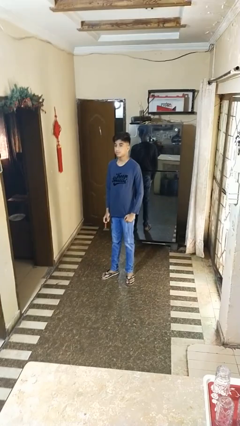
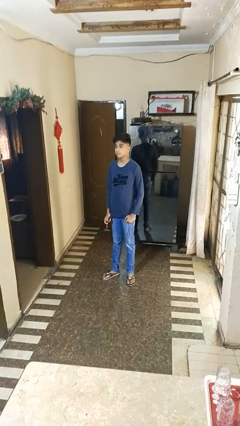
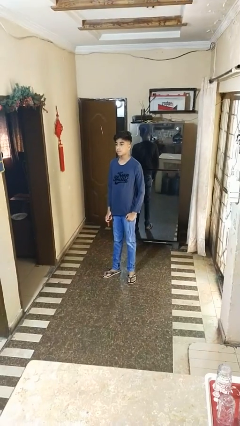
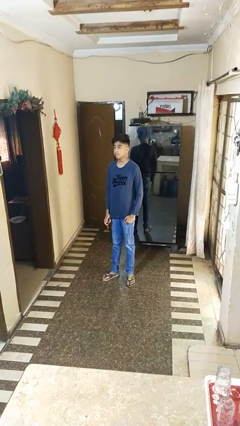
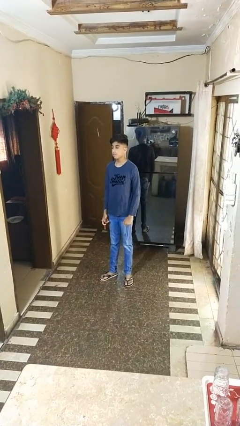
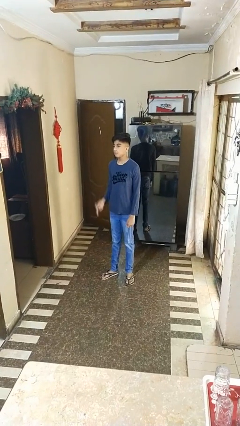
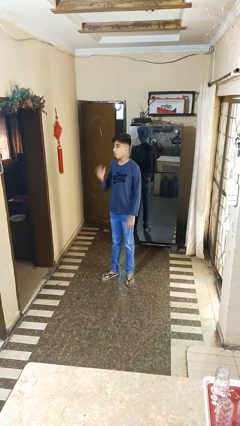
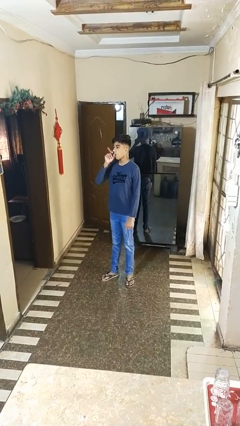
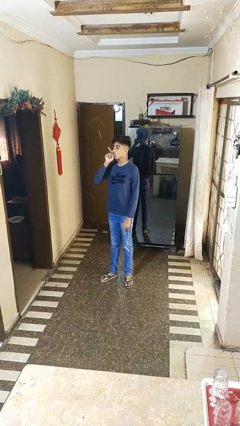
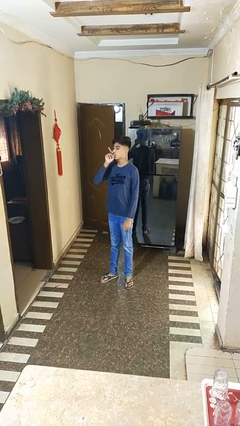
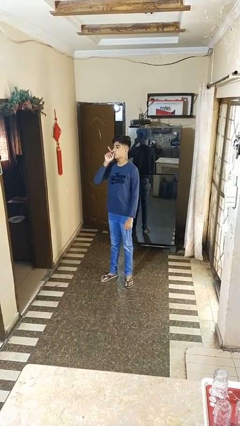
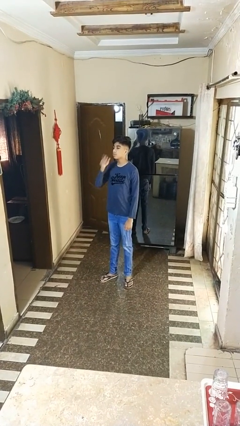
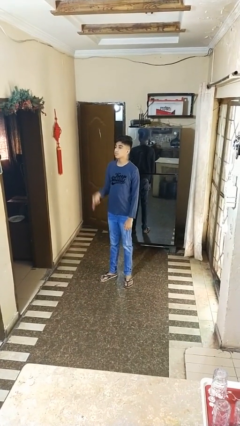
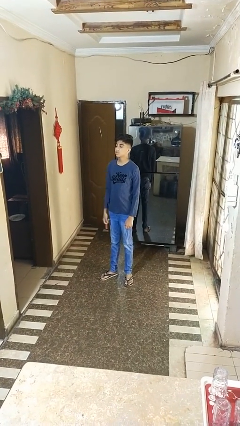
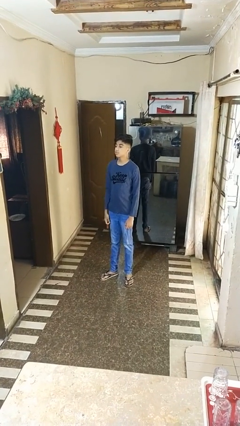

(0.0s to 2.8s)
person vapes

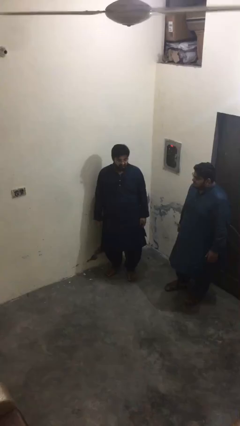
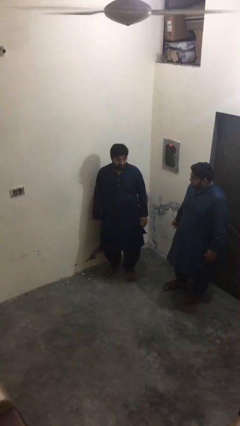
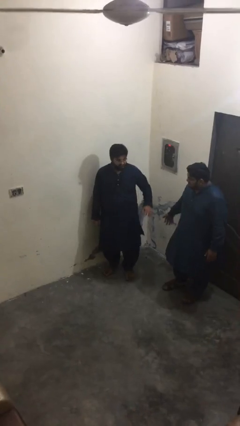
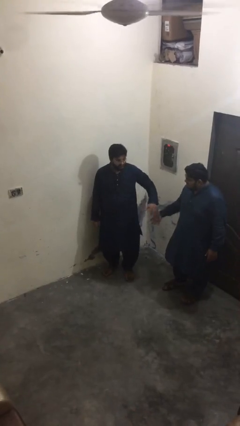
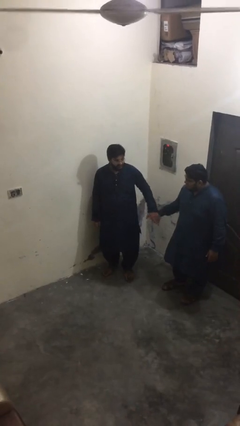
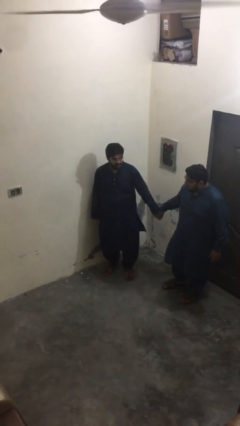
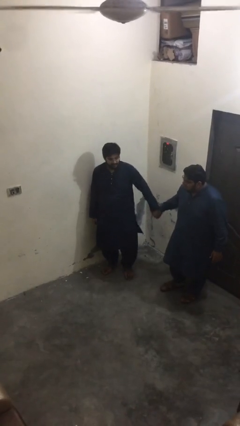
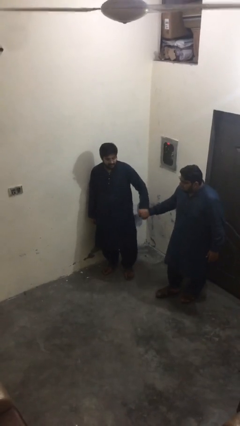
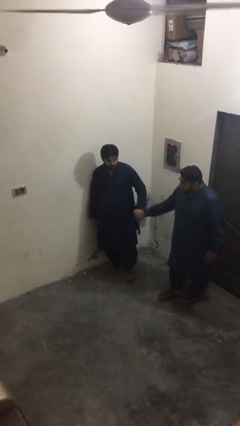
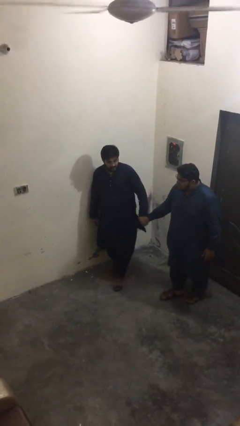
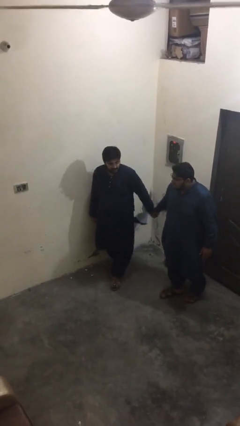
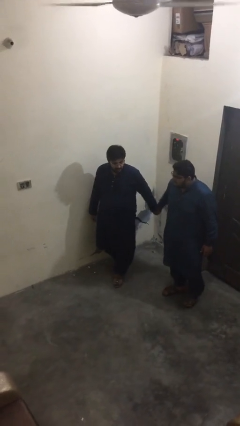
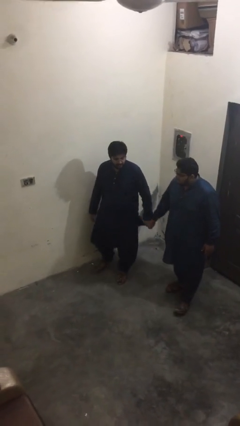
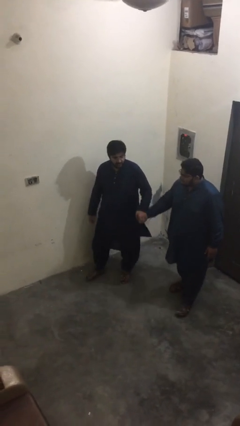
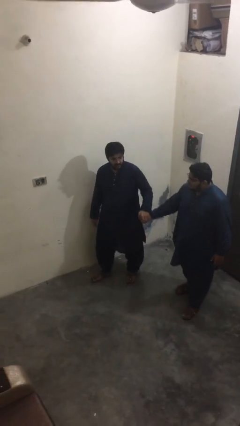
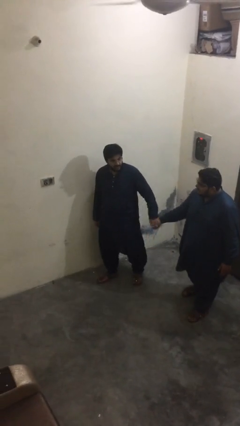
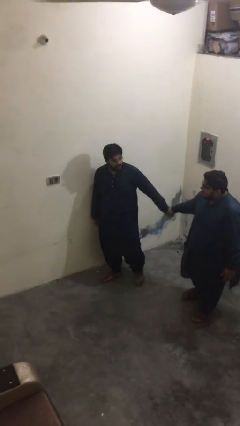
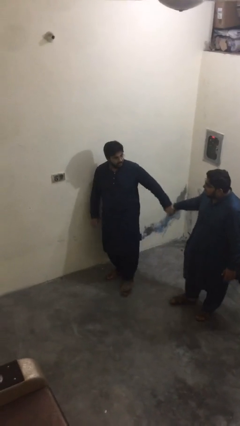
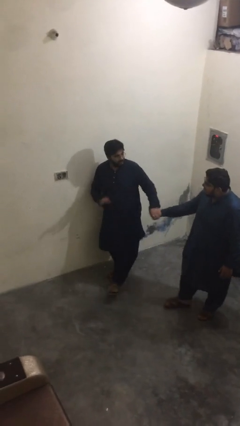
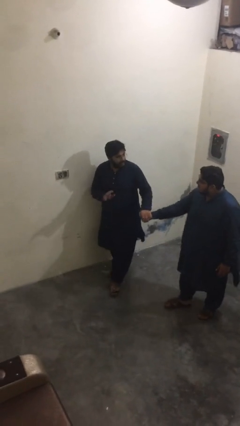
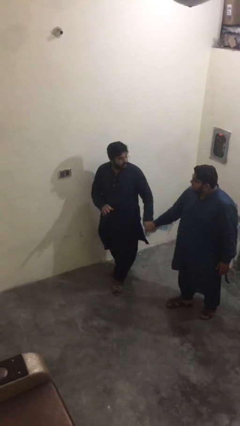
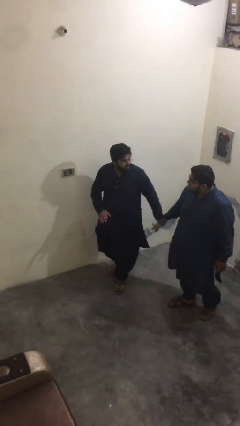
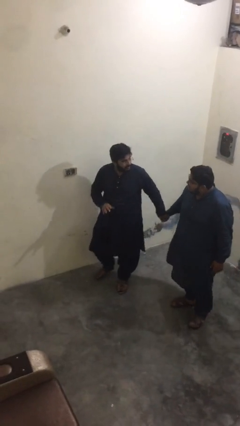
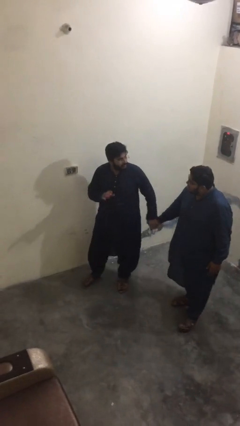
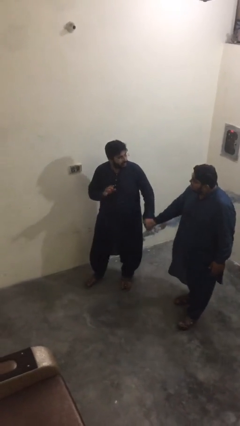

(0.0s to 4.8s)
person holds hand

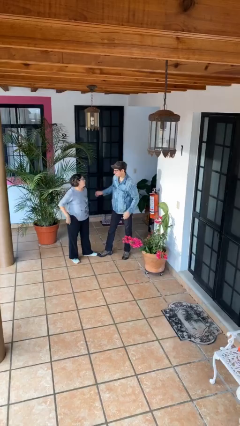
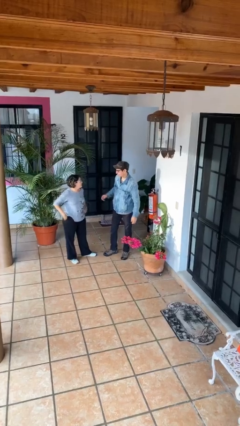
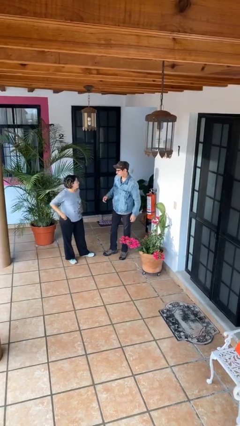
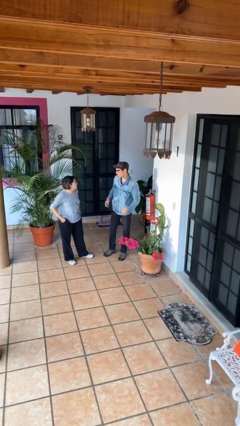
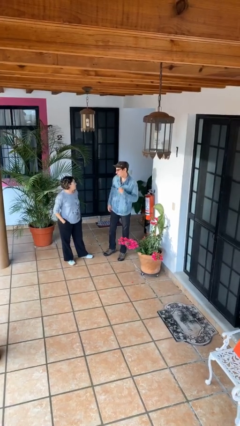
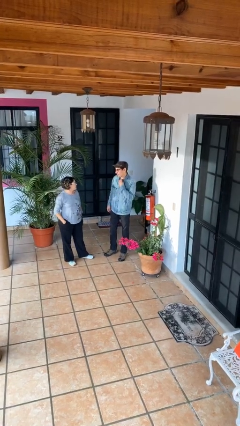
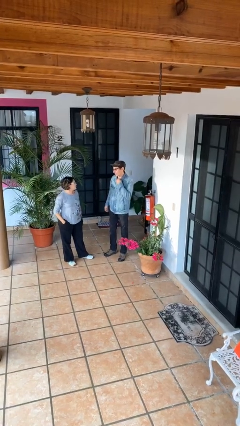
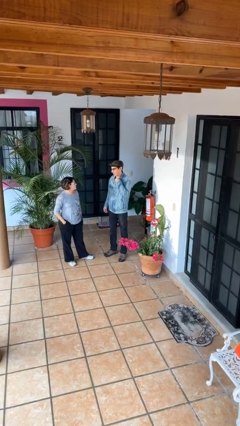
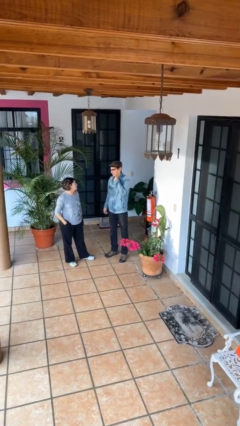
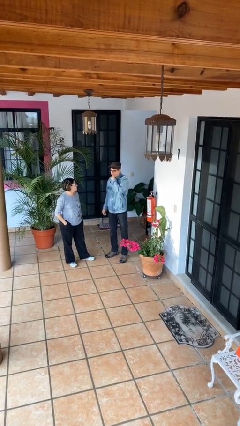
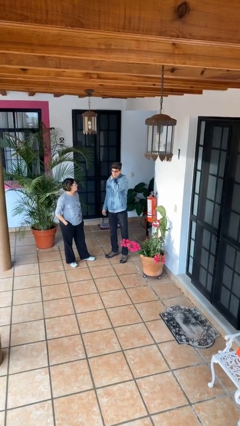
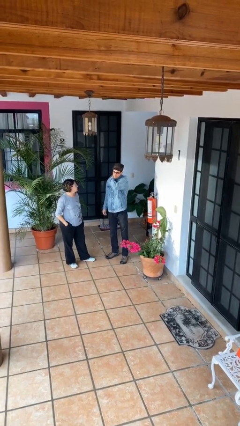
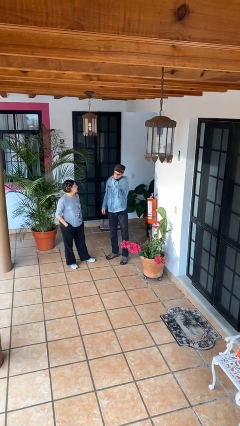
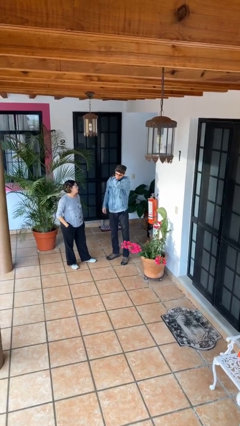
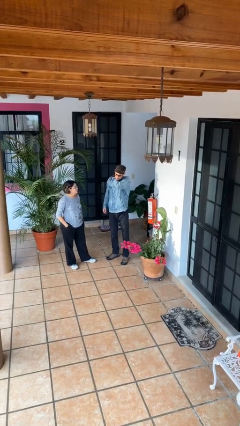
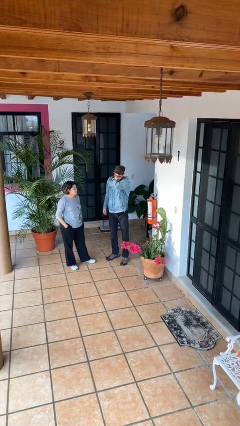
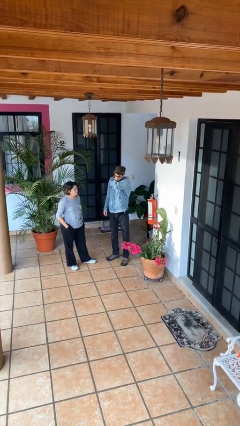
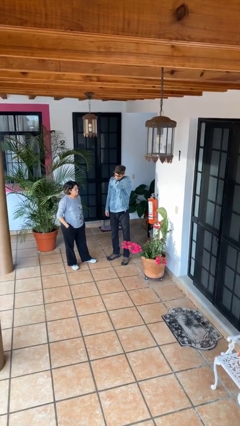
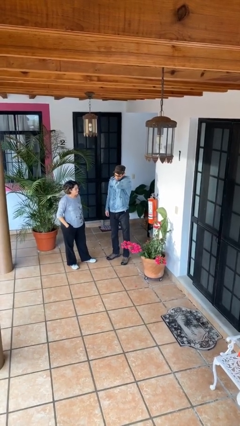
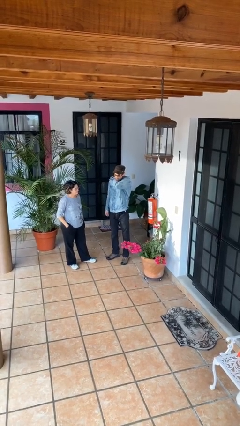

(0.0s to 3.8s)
person talks to person

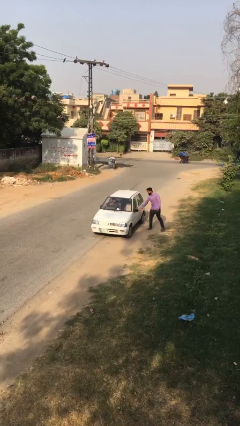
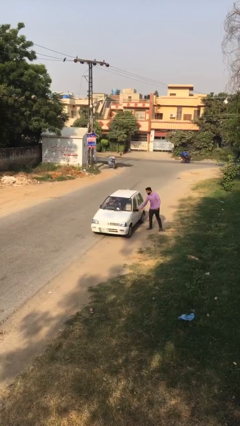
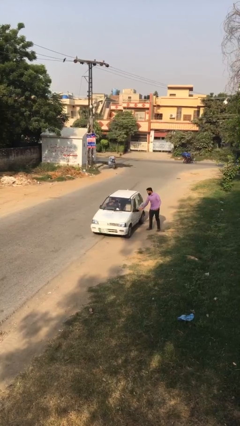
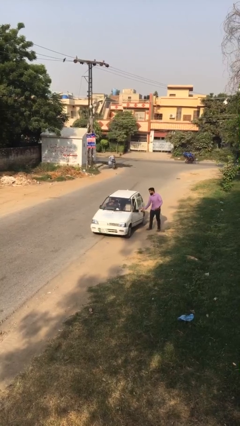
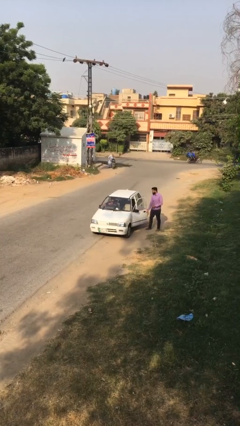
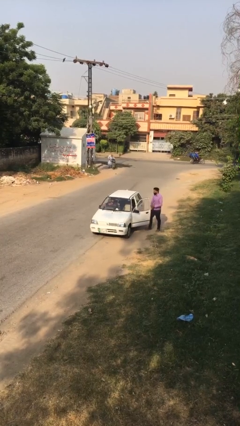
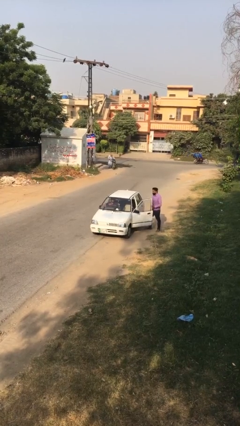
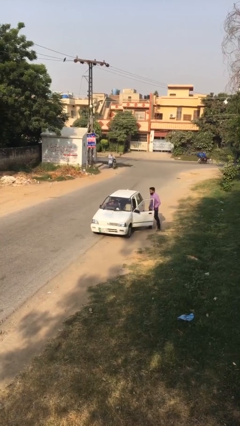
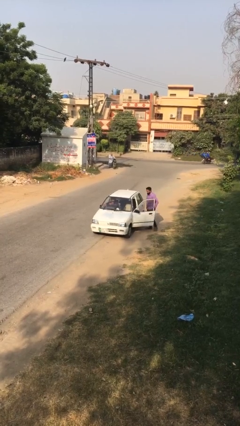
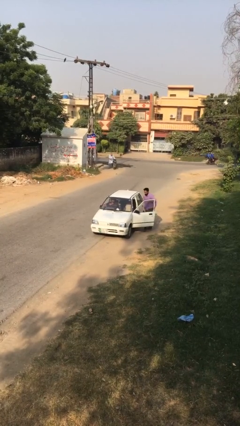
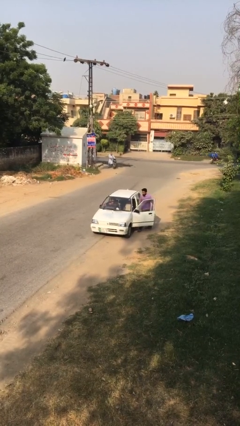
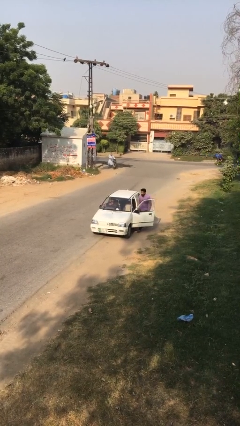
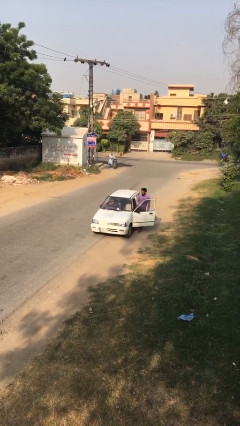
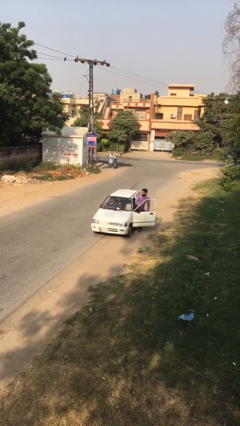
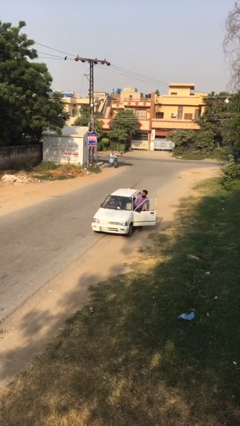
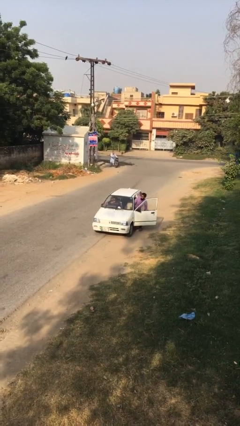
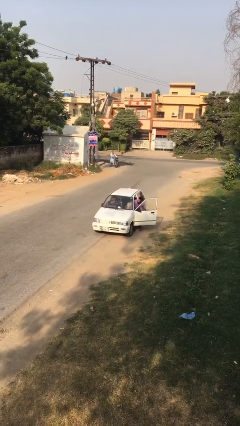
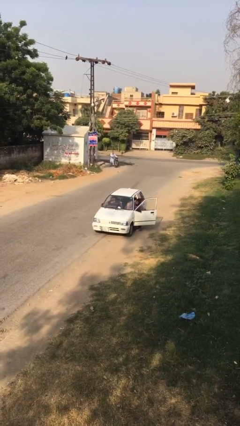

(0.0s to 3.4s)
car picks up person

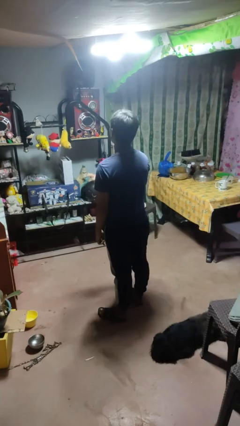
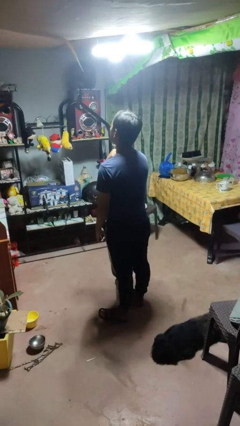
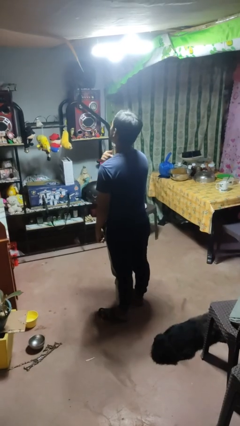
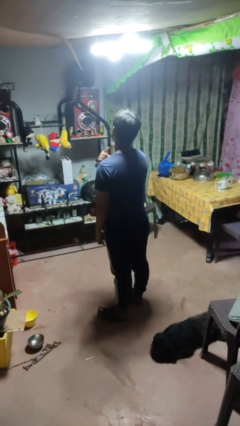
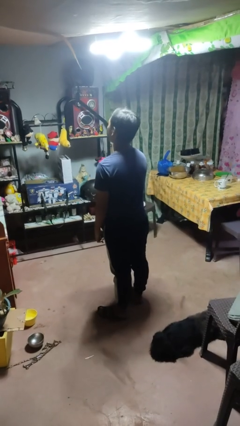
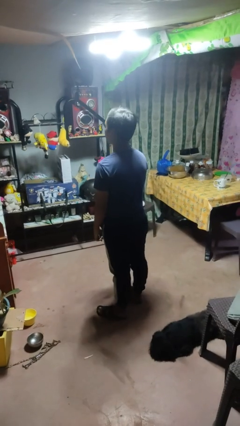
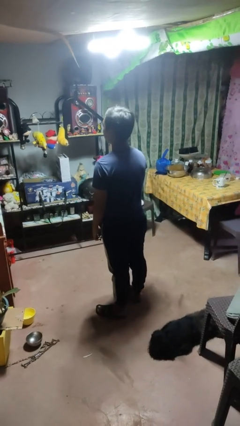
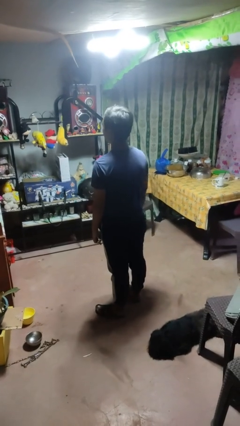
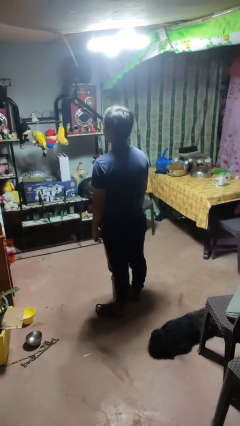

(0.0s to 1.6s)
person gestures cut

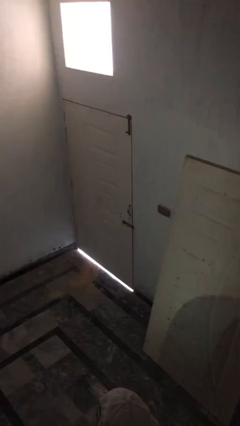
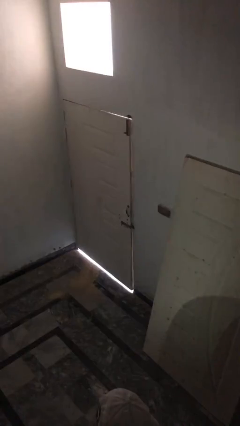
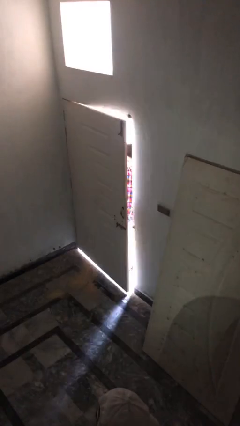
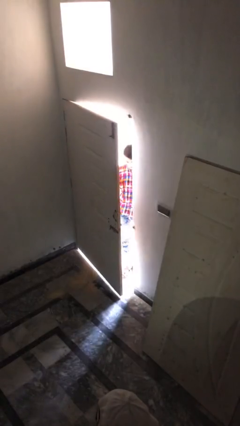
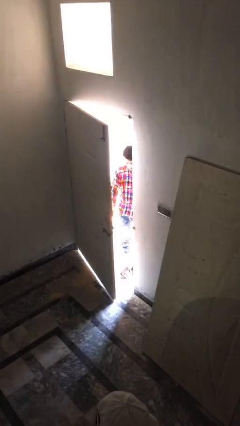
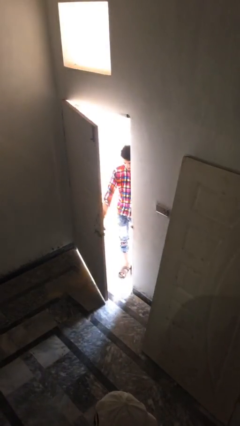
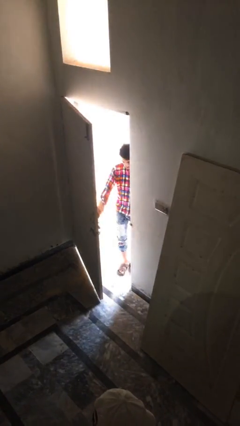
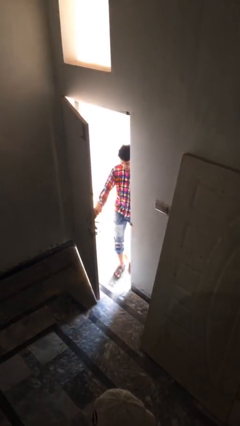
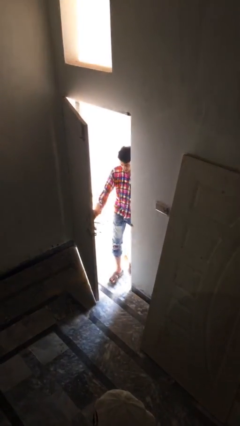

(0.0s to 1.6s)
person opens facility door
